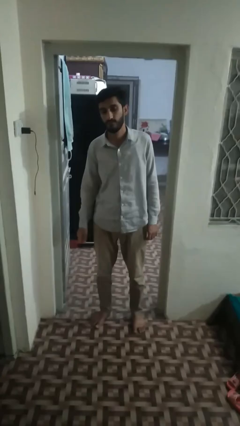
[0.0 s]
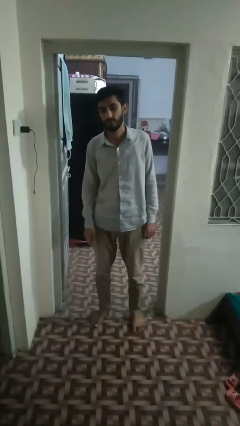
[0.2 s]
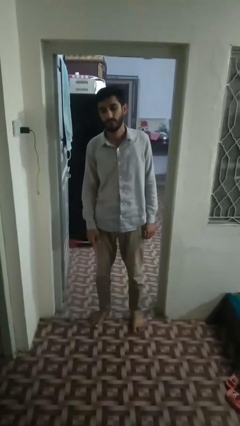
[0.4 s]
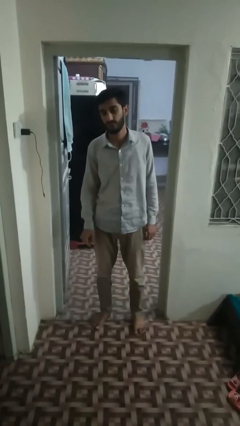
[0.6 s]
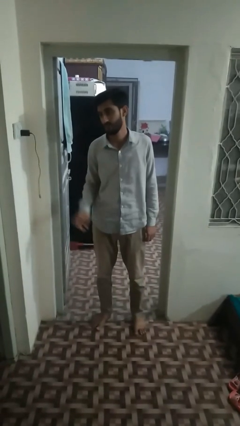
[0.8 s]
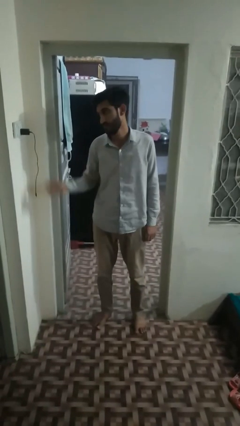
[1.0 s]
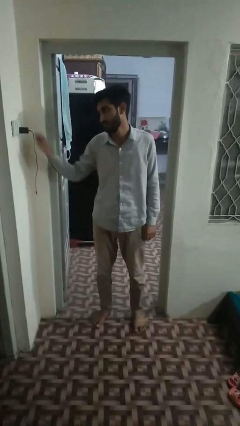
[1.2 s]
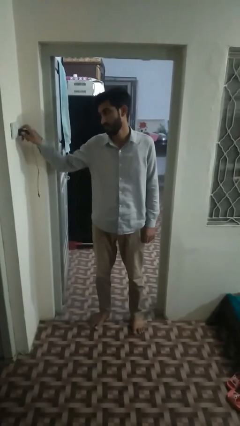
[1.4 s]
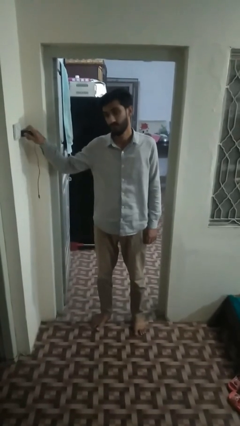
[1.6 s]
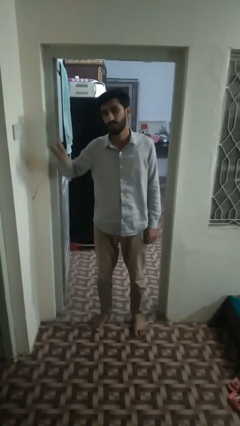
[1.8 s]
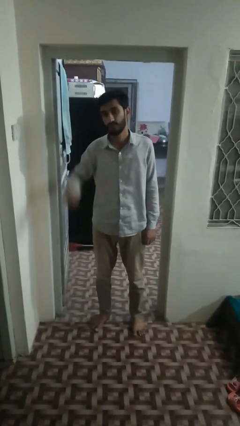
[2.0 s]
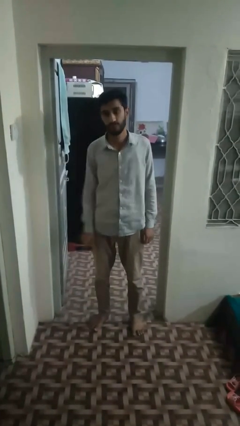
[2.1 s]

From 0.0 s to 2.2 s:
person unplugs from electrical socket

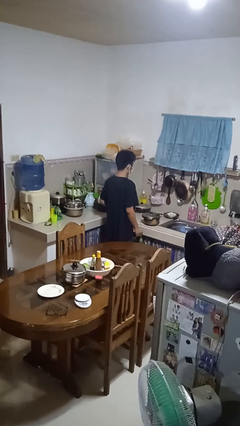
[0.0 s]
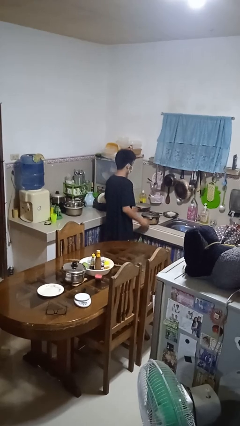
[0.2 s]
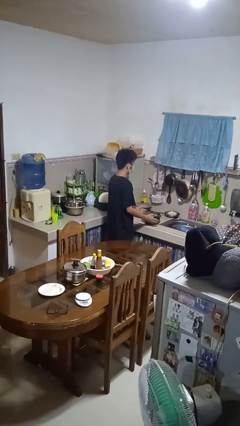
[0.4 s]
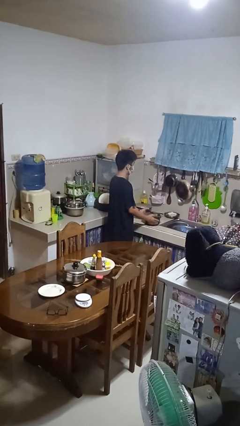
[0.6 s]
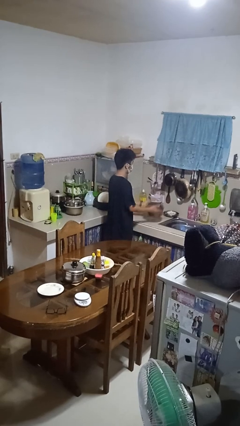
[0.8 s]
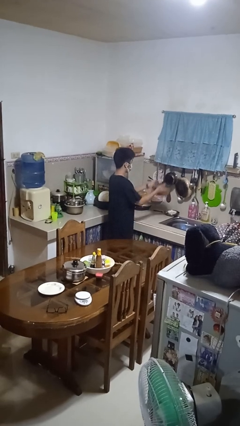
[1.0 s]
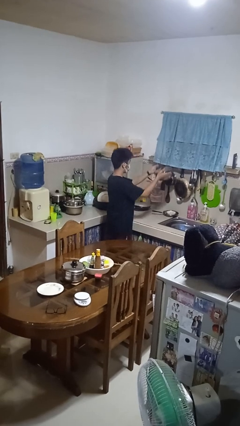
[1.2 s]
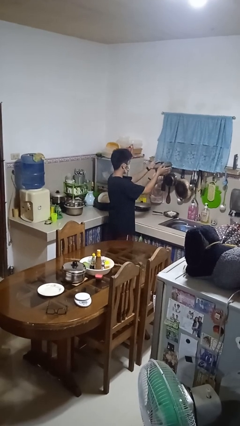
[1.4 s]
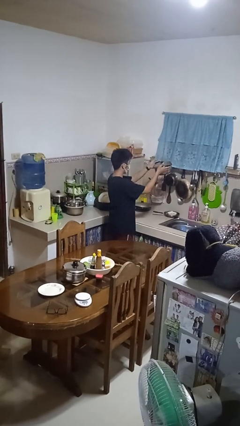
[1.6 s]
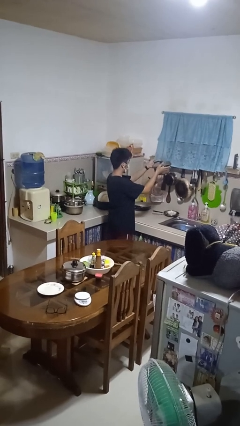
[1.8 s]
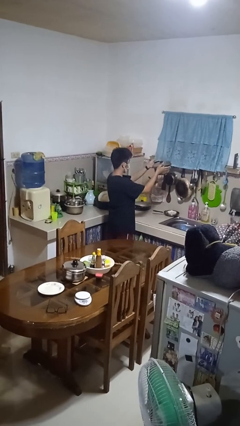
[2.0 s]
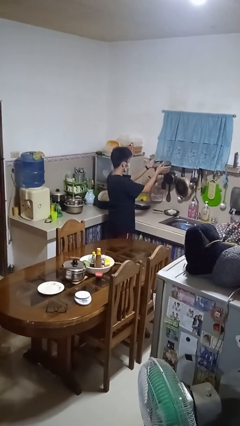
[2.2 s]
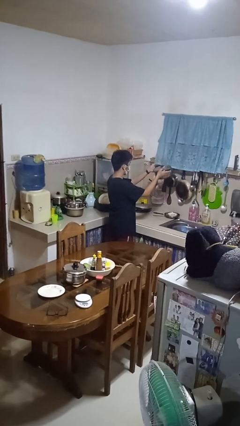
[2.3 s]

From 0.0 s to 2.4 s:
person picks up object from countertop

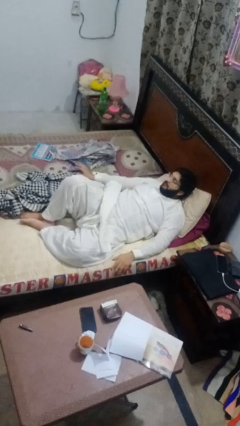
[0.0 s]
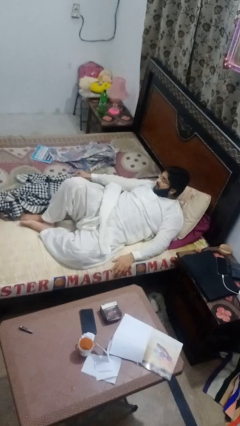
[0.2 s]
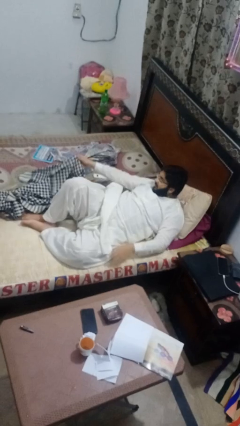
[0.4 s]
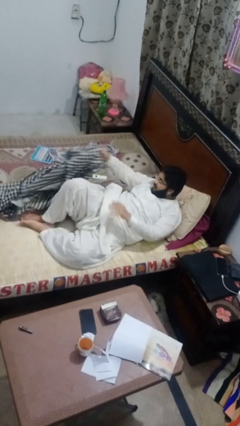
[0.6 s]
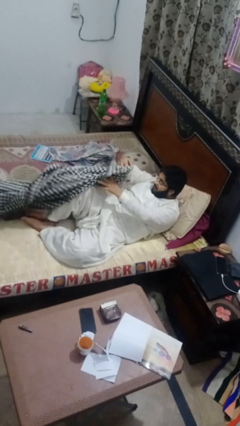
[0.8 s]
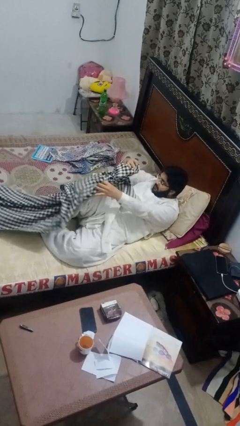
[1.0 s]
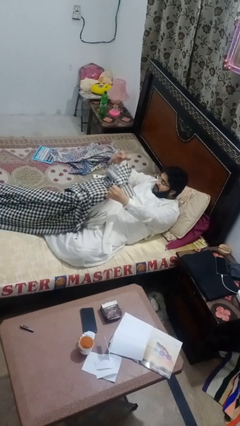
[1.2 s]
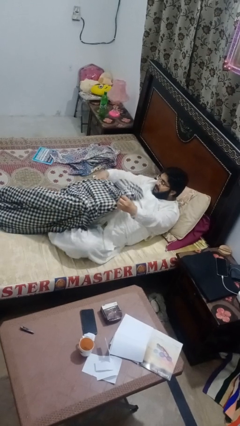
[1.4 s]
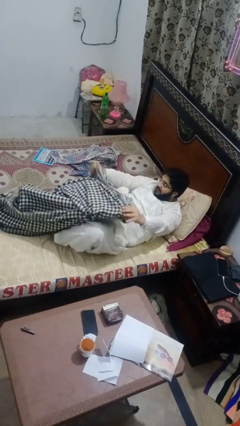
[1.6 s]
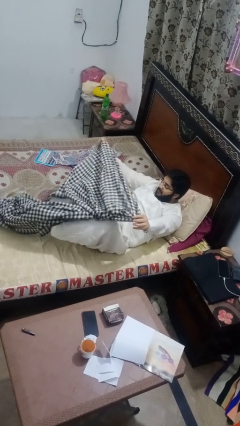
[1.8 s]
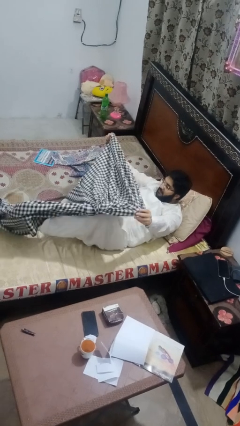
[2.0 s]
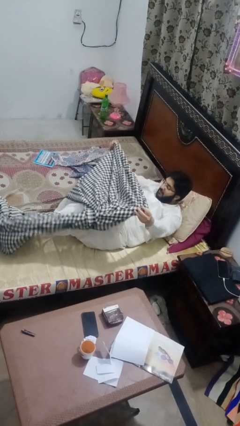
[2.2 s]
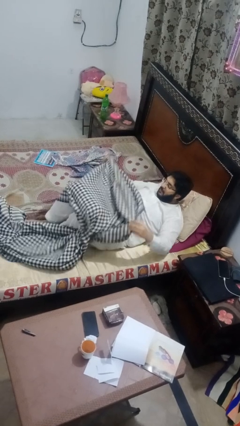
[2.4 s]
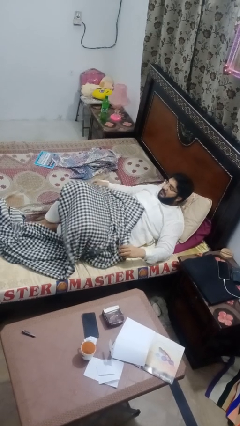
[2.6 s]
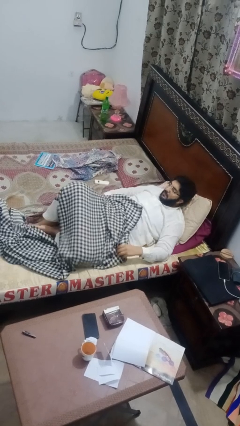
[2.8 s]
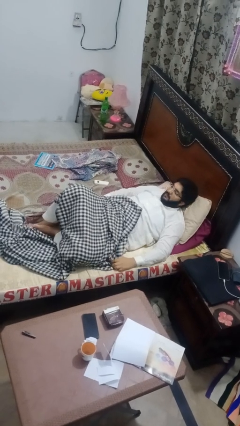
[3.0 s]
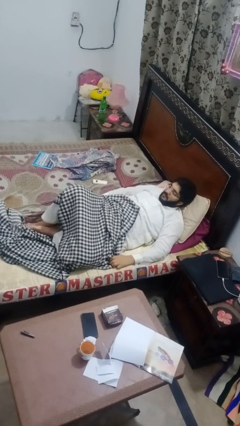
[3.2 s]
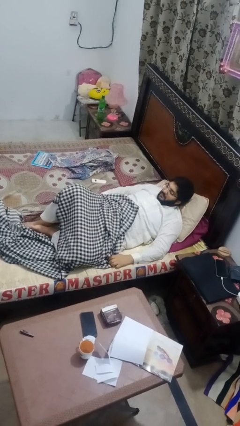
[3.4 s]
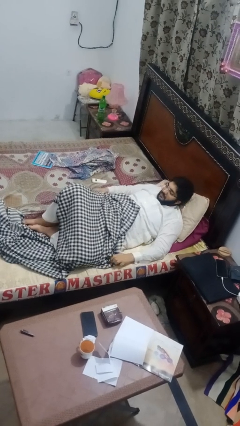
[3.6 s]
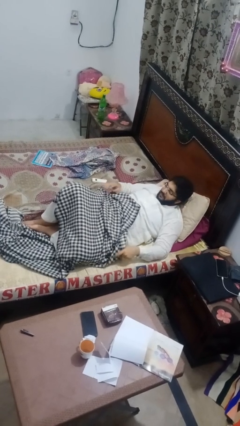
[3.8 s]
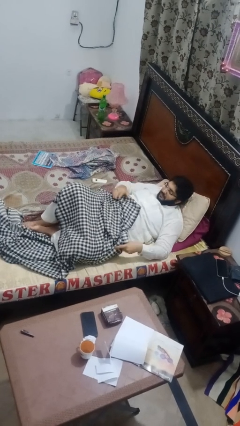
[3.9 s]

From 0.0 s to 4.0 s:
person covers with blanket

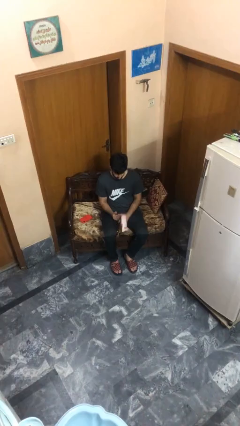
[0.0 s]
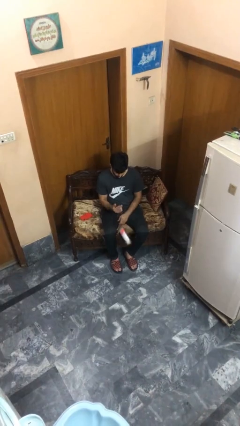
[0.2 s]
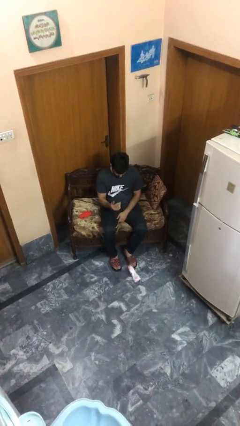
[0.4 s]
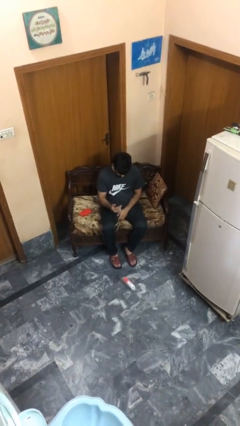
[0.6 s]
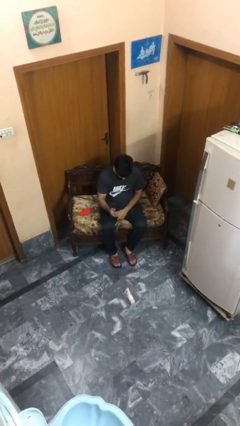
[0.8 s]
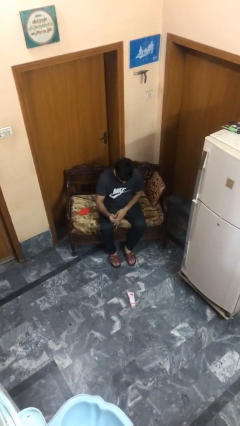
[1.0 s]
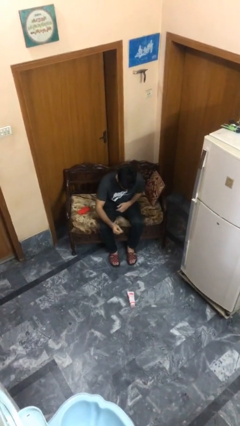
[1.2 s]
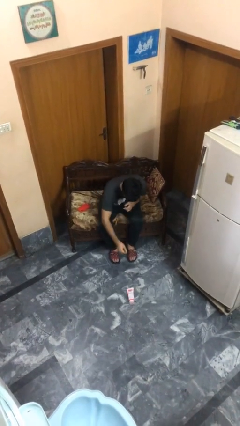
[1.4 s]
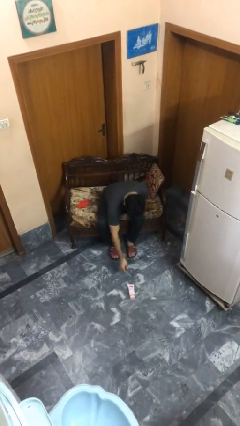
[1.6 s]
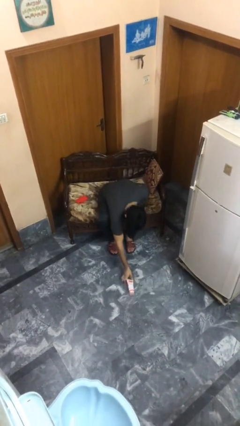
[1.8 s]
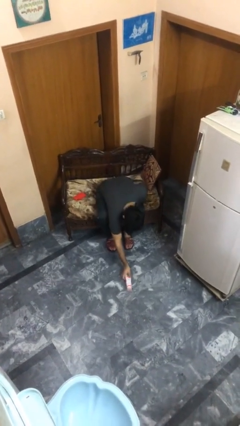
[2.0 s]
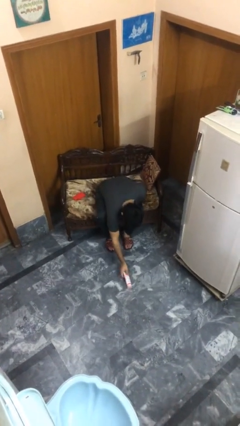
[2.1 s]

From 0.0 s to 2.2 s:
person drops object

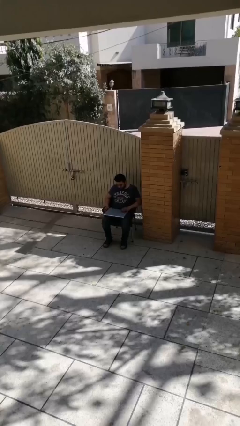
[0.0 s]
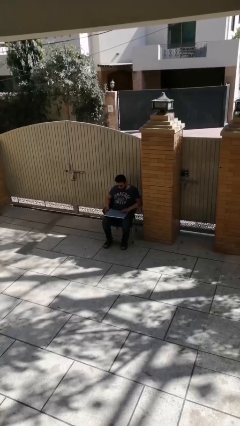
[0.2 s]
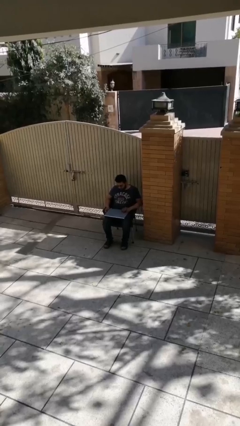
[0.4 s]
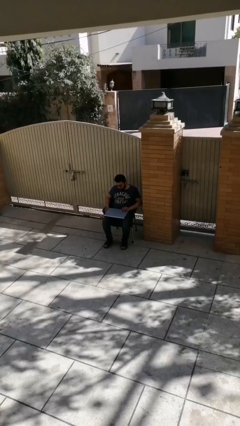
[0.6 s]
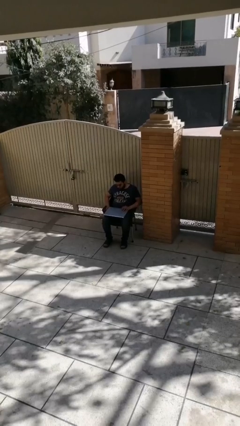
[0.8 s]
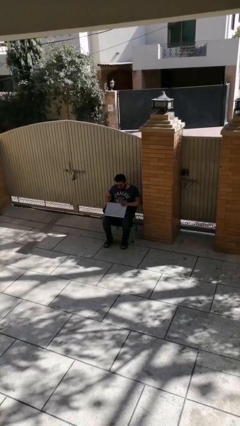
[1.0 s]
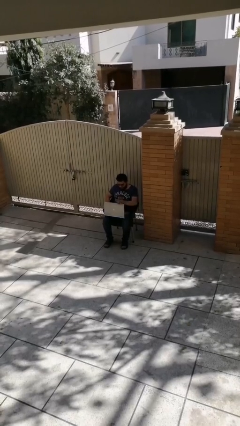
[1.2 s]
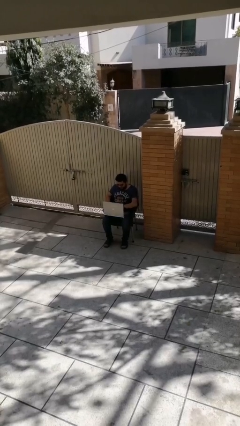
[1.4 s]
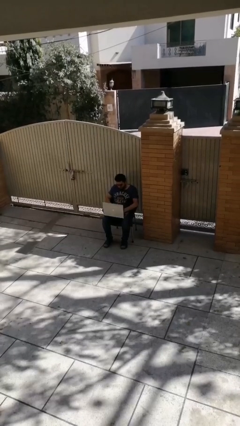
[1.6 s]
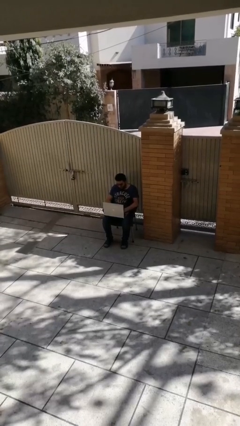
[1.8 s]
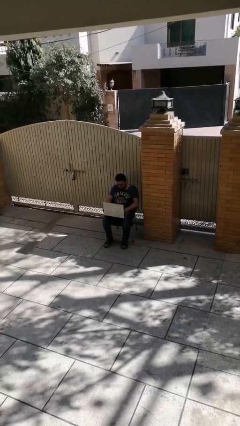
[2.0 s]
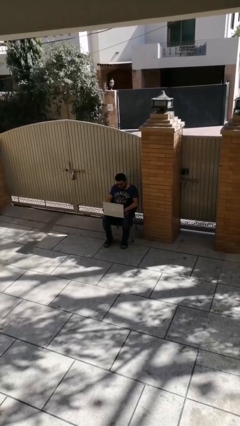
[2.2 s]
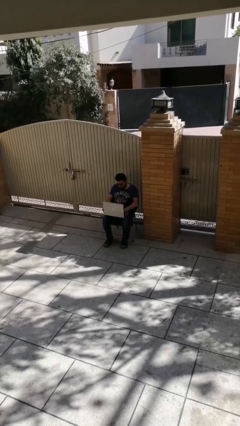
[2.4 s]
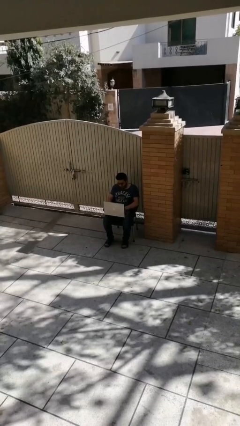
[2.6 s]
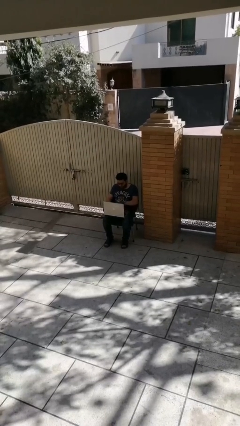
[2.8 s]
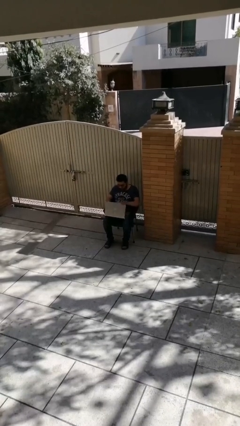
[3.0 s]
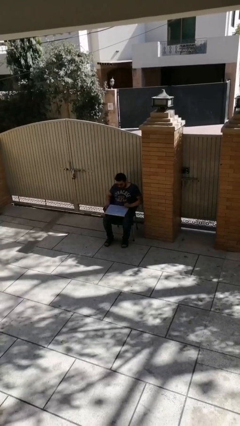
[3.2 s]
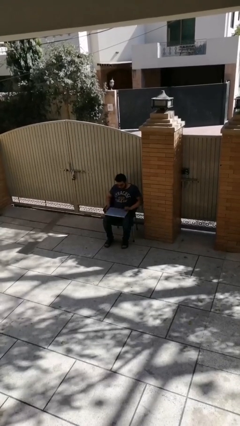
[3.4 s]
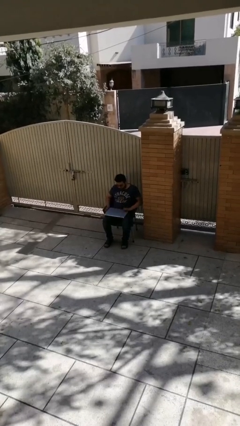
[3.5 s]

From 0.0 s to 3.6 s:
person interacts with laptop

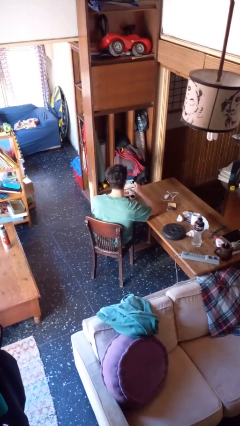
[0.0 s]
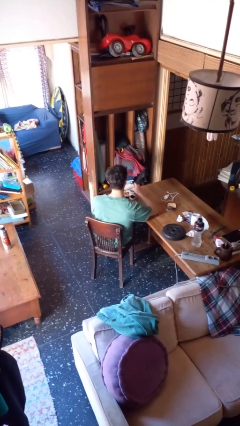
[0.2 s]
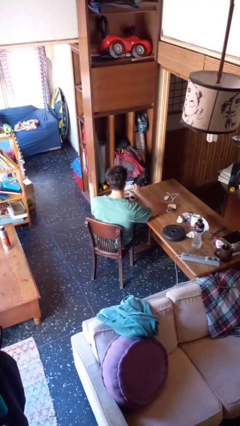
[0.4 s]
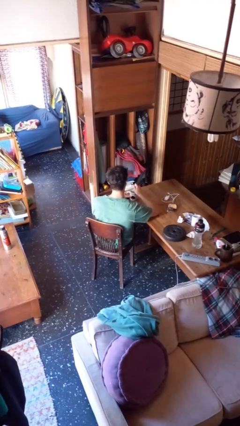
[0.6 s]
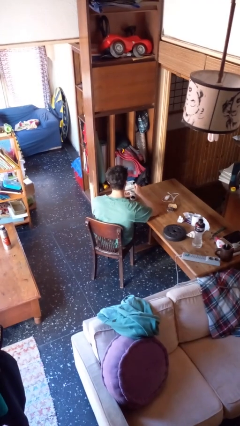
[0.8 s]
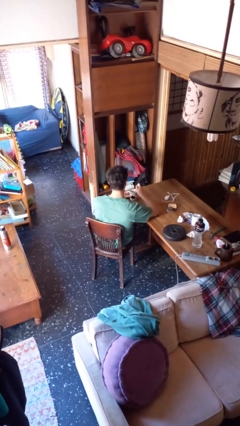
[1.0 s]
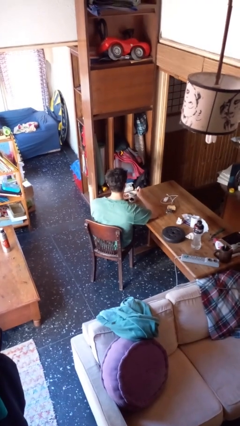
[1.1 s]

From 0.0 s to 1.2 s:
person stirs mug

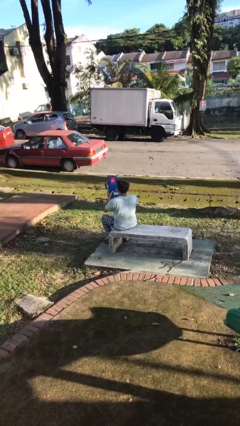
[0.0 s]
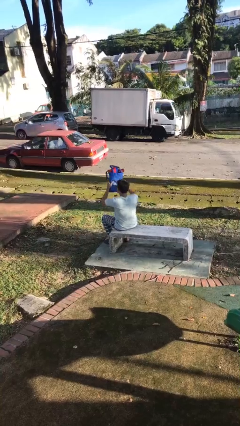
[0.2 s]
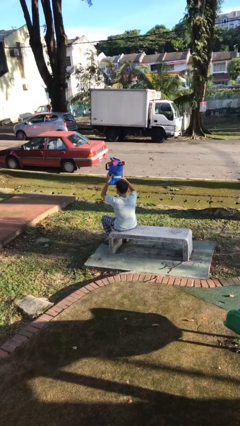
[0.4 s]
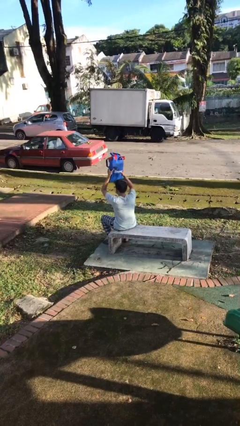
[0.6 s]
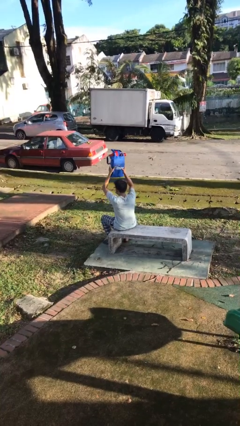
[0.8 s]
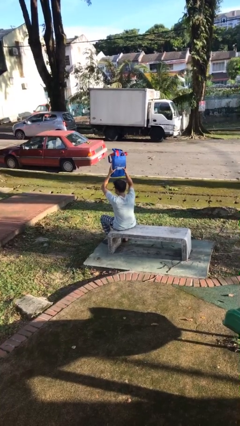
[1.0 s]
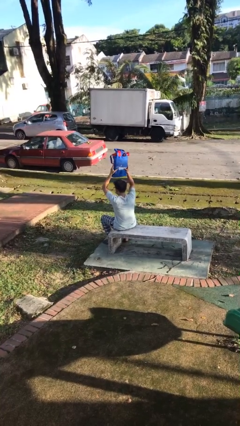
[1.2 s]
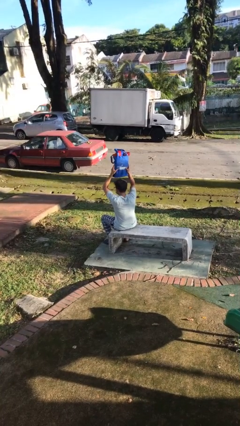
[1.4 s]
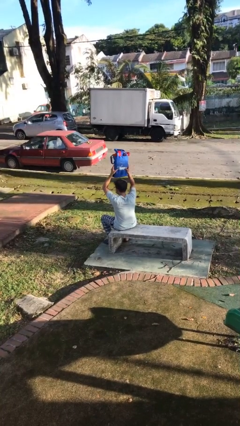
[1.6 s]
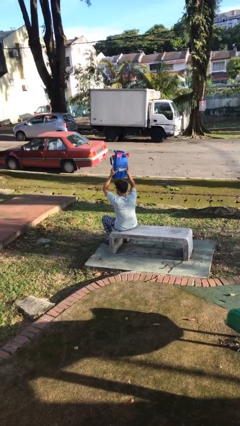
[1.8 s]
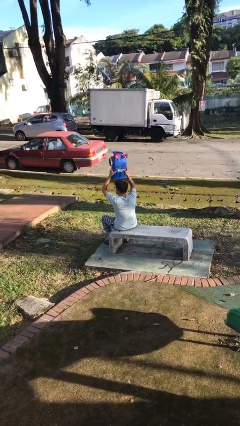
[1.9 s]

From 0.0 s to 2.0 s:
person holds object above head
